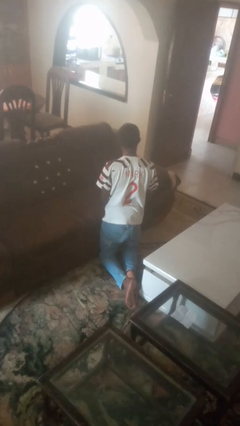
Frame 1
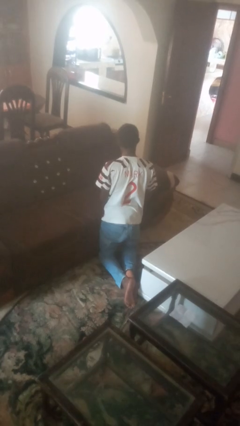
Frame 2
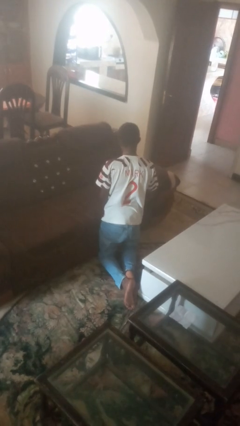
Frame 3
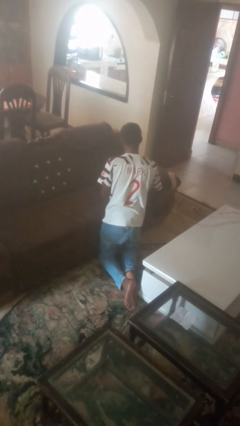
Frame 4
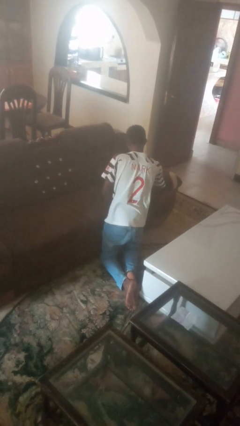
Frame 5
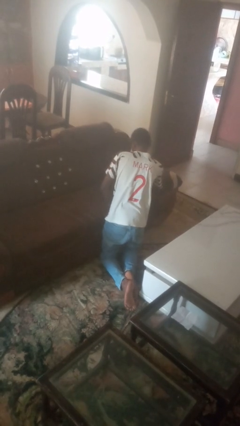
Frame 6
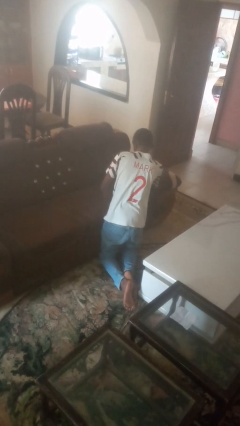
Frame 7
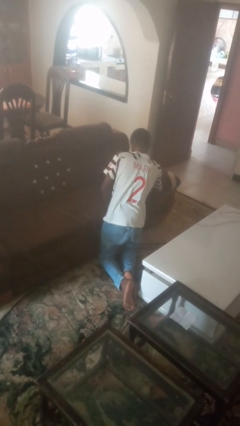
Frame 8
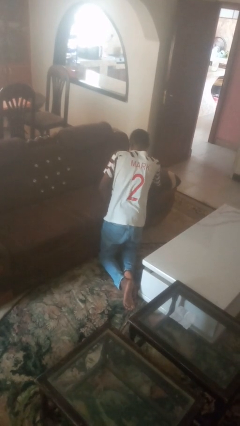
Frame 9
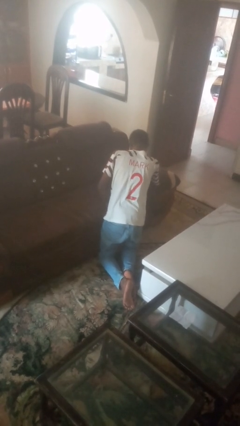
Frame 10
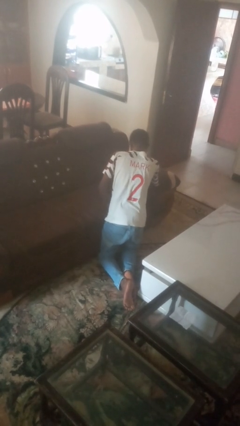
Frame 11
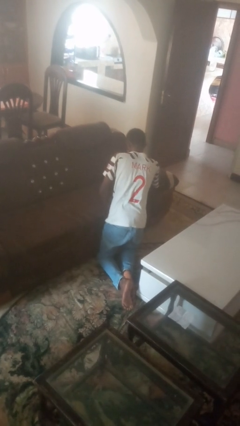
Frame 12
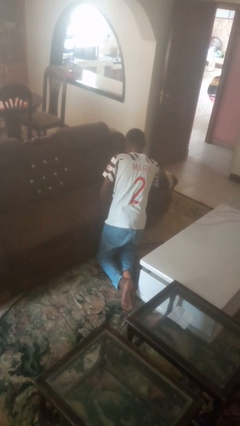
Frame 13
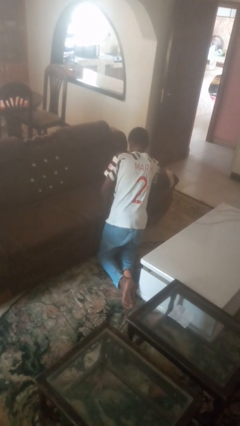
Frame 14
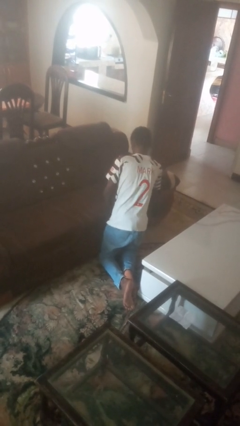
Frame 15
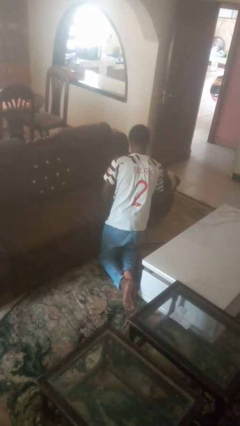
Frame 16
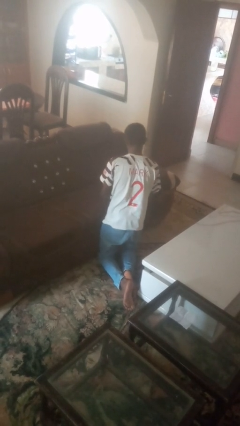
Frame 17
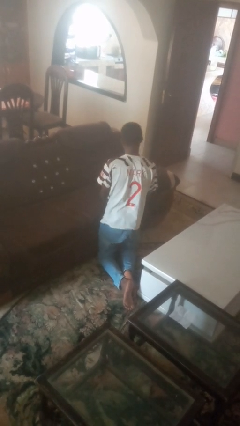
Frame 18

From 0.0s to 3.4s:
person searches in couch

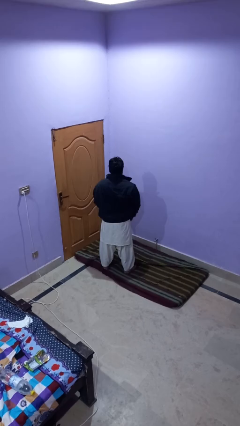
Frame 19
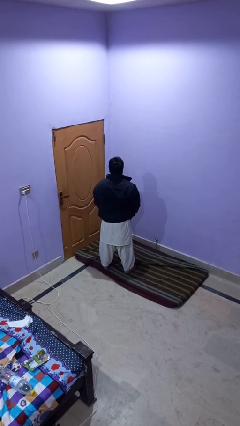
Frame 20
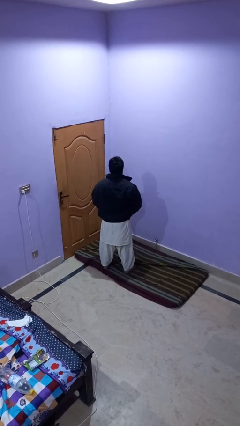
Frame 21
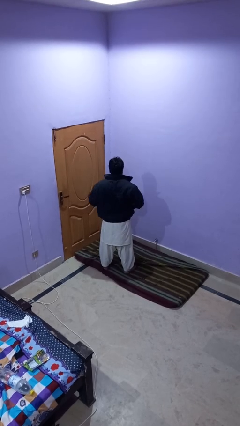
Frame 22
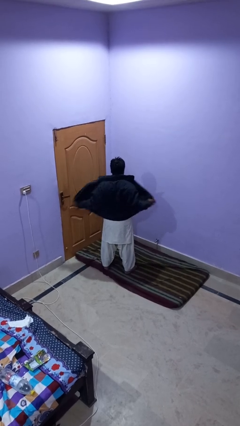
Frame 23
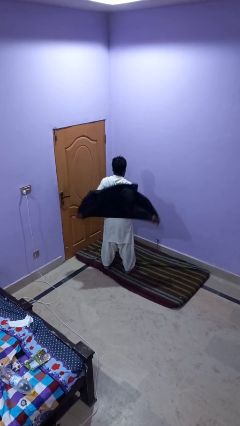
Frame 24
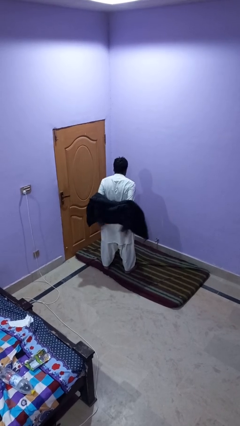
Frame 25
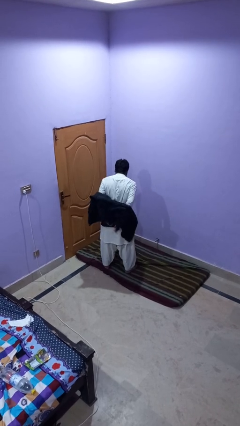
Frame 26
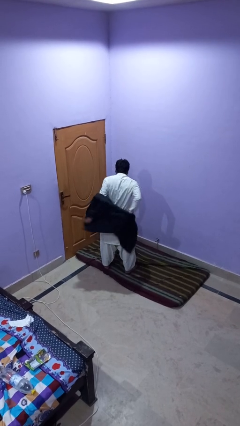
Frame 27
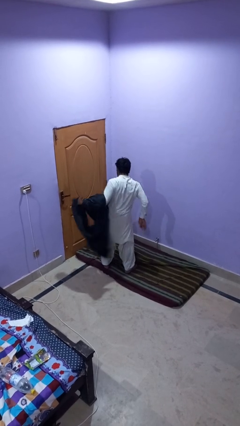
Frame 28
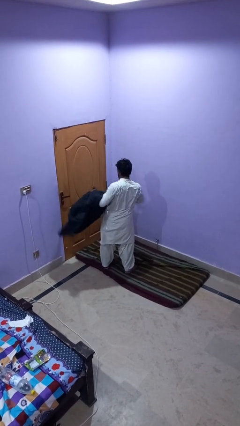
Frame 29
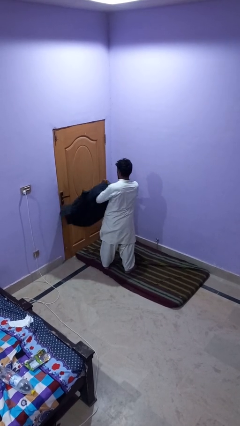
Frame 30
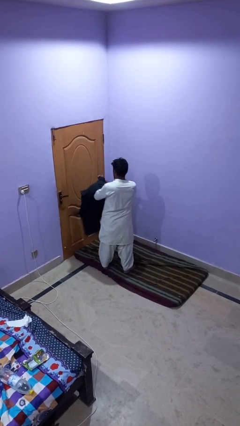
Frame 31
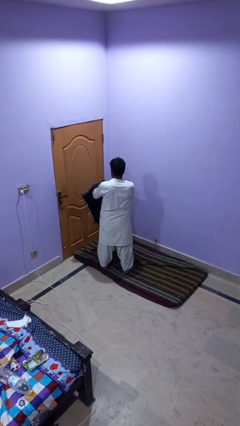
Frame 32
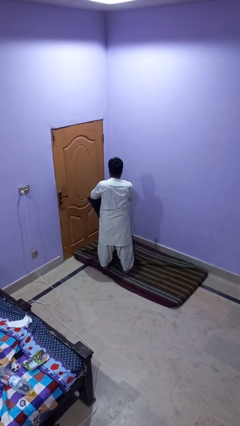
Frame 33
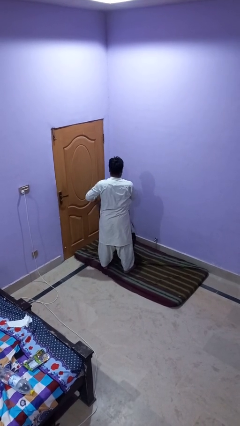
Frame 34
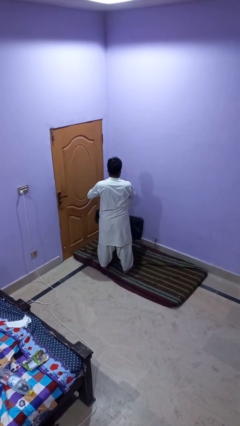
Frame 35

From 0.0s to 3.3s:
person takes off jacket

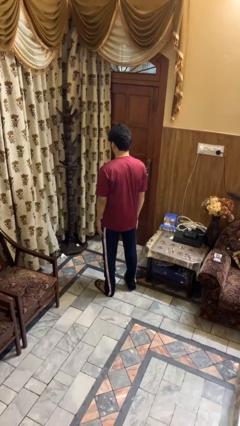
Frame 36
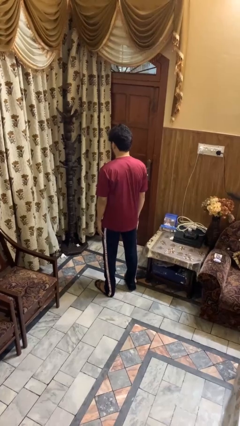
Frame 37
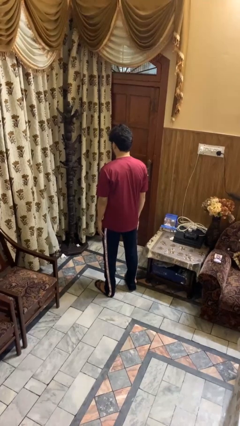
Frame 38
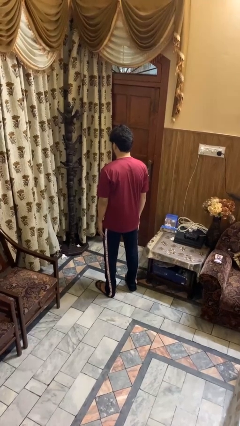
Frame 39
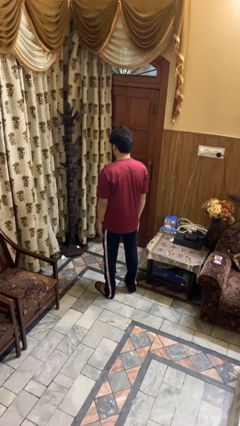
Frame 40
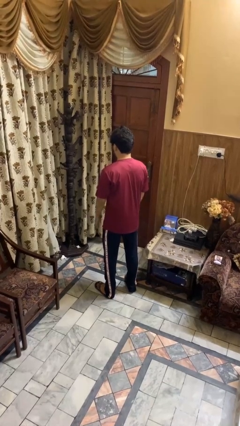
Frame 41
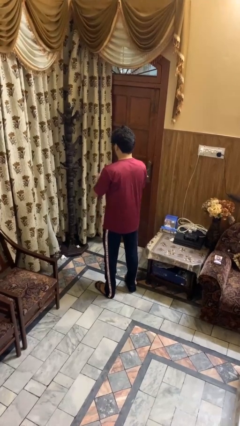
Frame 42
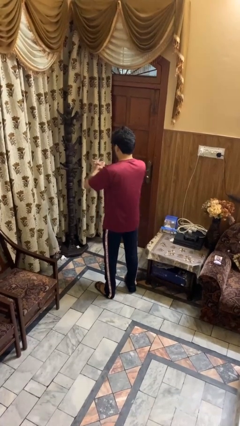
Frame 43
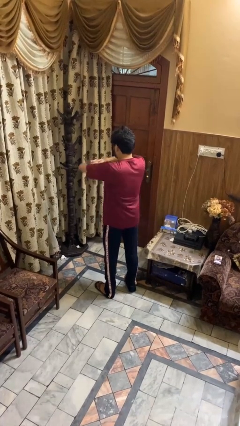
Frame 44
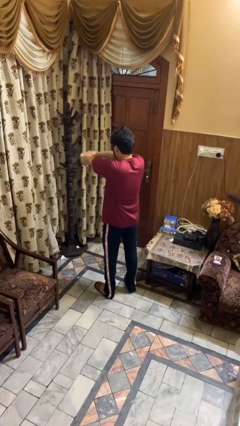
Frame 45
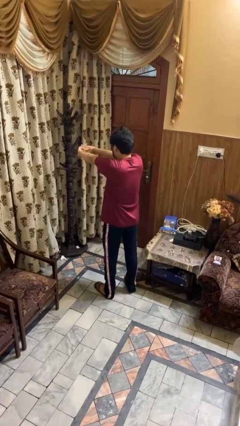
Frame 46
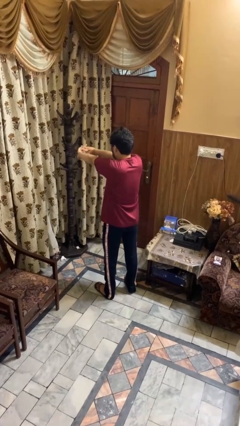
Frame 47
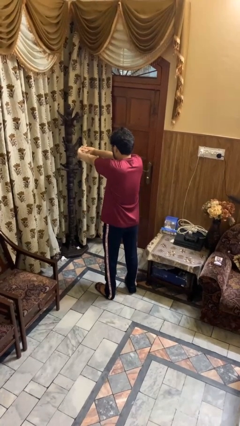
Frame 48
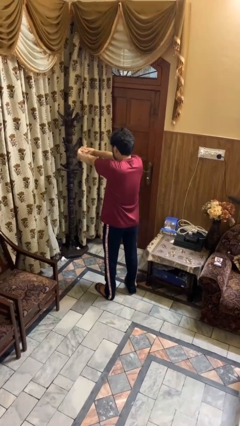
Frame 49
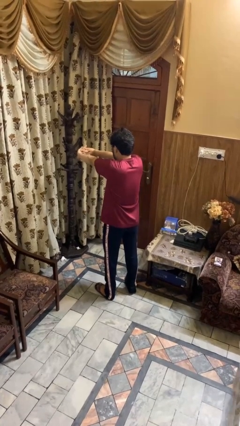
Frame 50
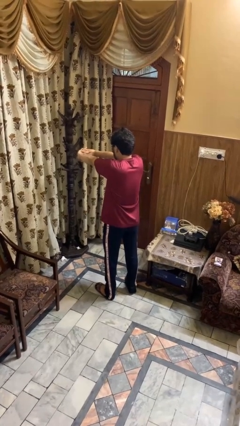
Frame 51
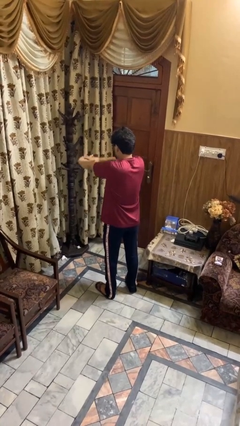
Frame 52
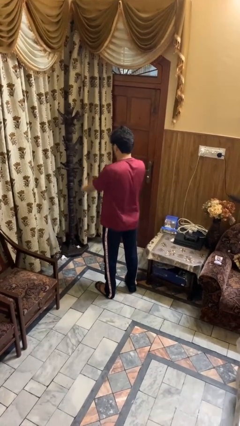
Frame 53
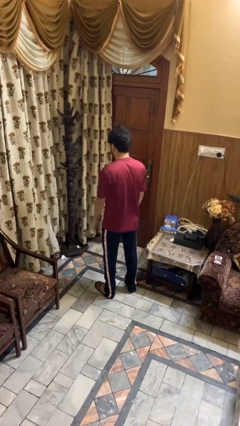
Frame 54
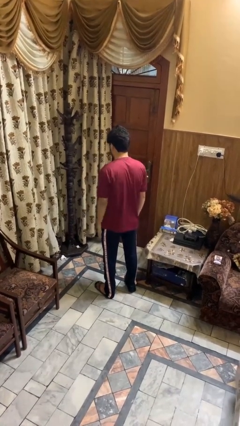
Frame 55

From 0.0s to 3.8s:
person cracks knuckles

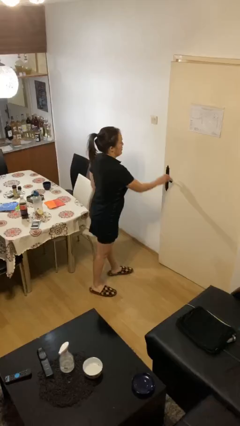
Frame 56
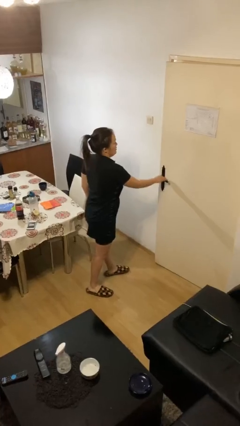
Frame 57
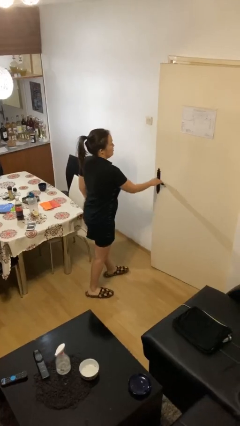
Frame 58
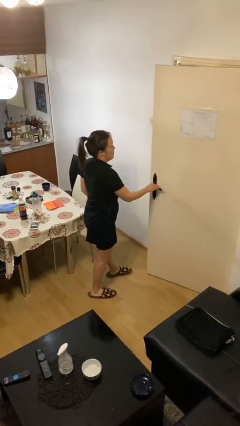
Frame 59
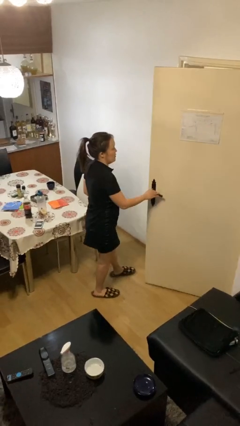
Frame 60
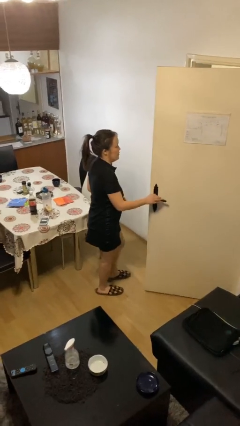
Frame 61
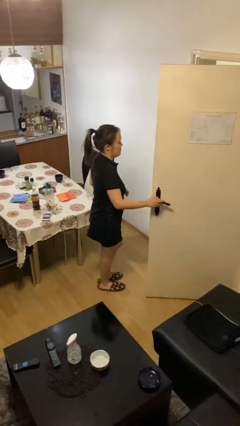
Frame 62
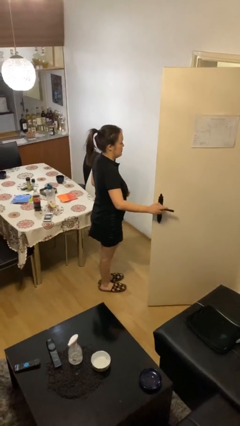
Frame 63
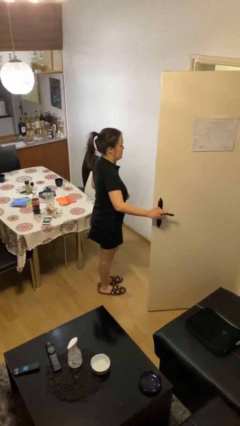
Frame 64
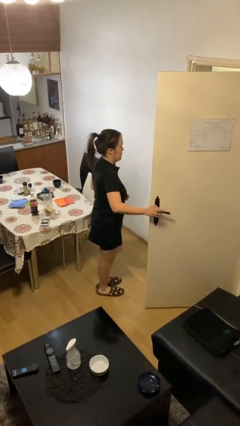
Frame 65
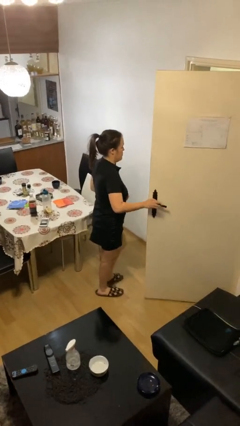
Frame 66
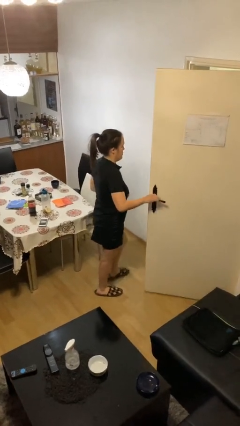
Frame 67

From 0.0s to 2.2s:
person opens facility door

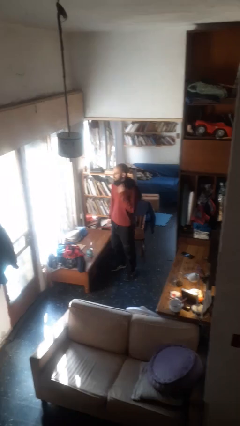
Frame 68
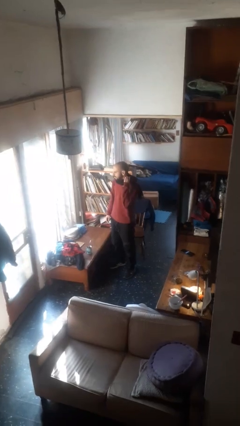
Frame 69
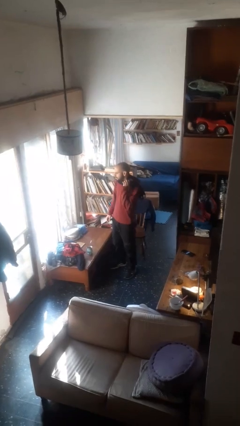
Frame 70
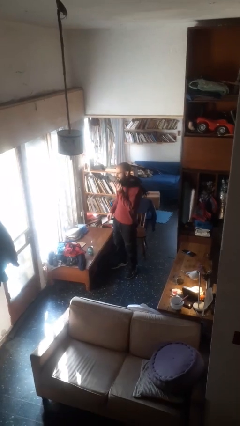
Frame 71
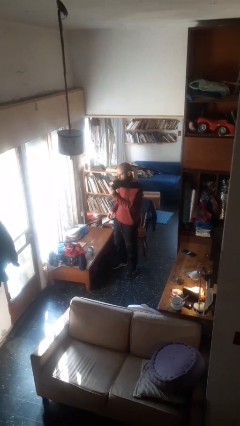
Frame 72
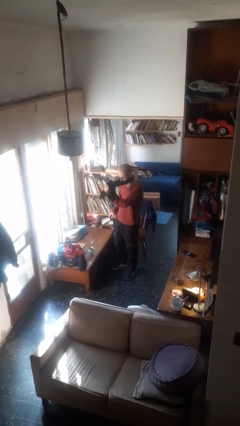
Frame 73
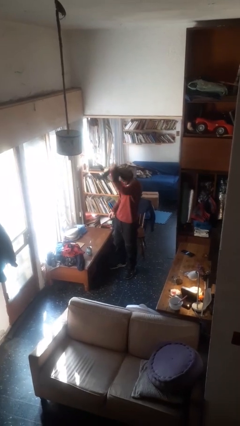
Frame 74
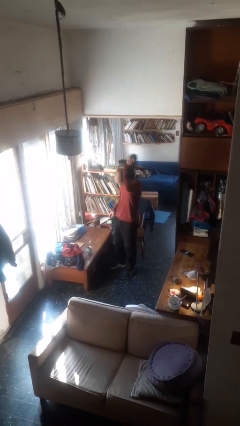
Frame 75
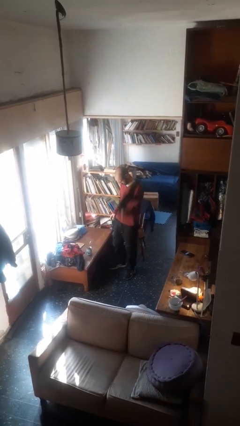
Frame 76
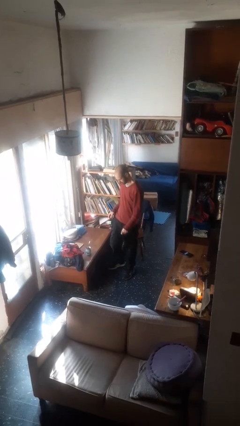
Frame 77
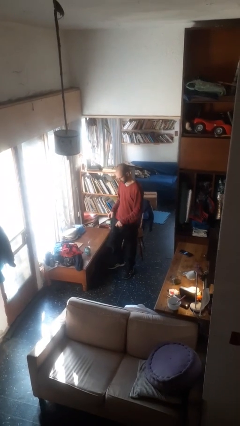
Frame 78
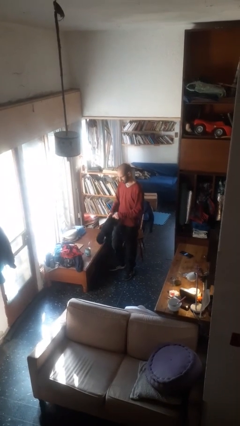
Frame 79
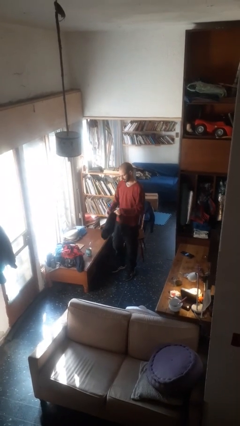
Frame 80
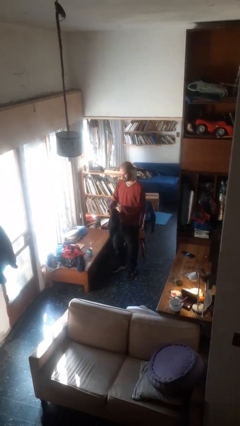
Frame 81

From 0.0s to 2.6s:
person takes off scarf

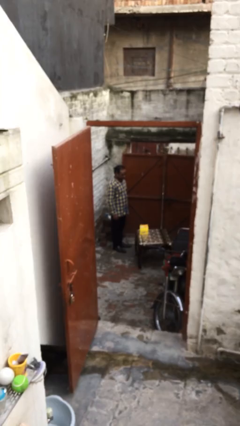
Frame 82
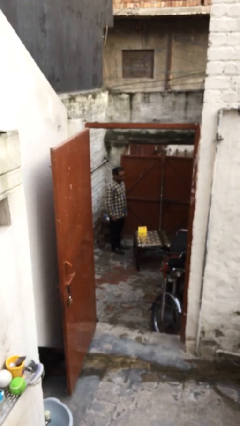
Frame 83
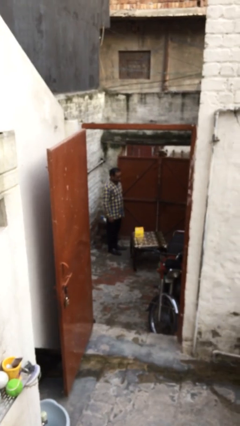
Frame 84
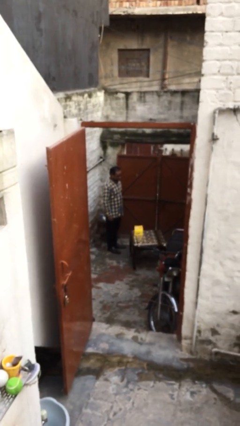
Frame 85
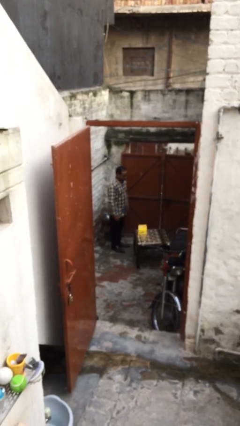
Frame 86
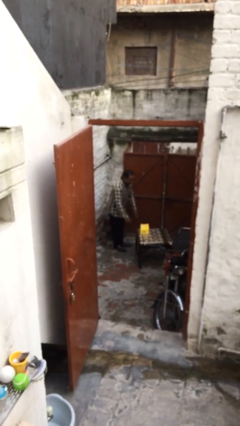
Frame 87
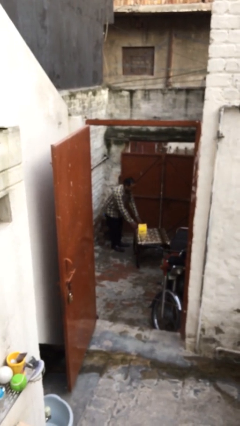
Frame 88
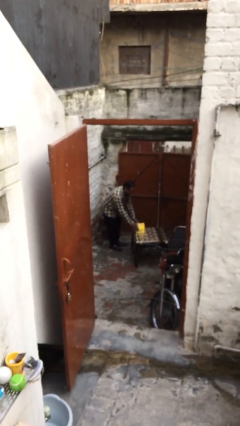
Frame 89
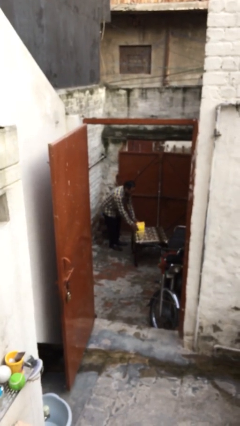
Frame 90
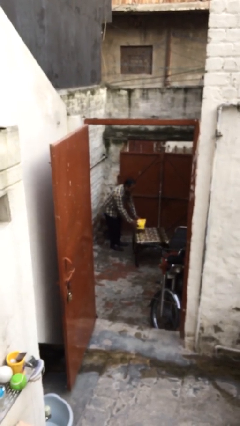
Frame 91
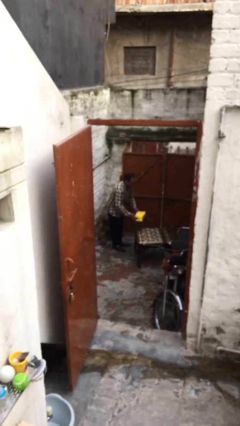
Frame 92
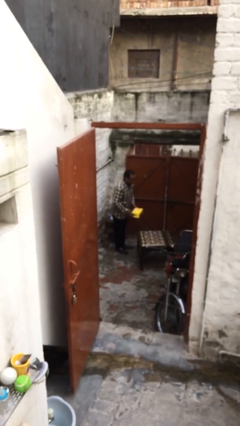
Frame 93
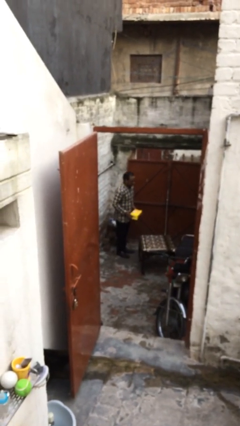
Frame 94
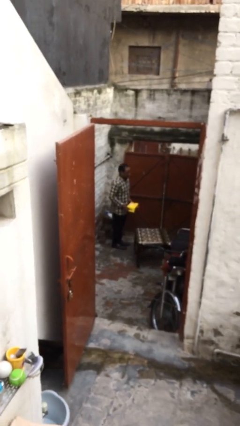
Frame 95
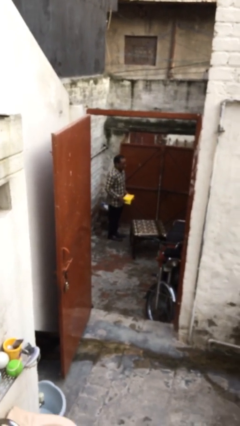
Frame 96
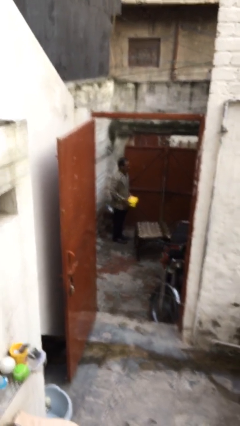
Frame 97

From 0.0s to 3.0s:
person picks up object from table
